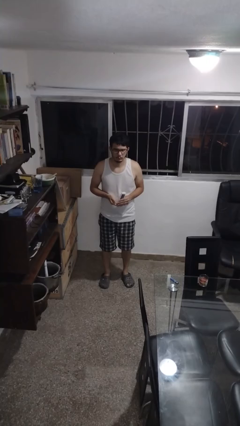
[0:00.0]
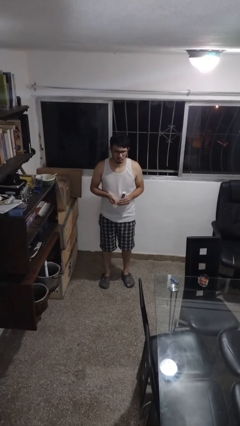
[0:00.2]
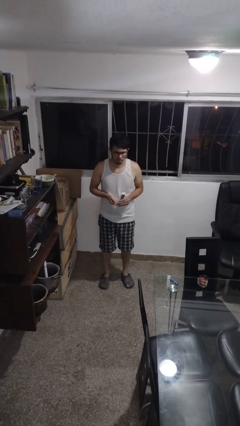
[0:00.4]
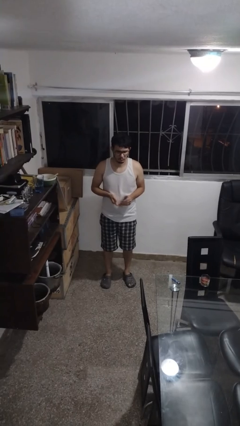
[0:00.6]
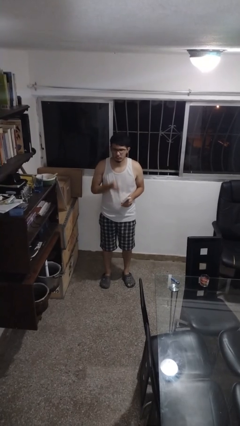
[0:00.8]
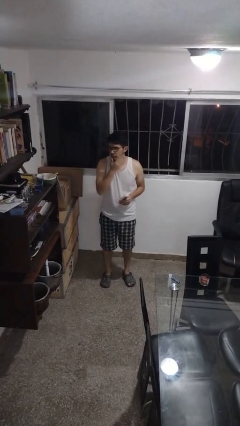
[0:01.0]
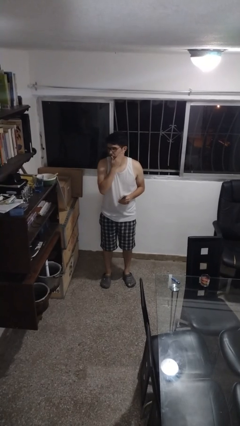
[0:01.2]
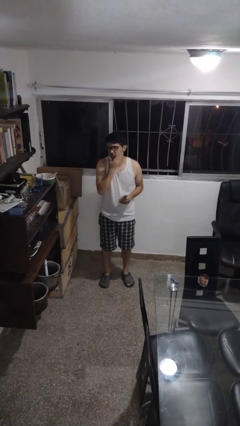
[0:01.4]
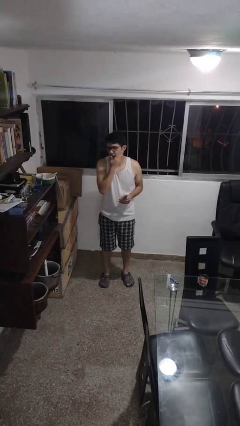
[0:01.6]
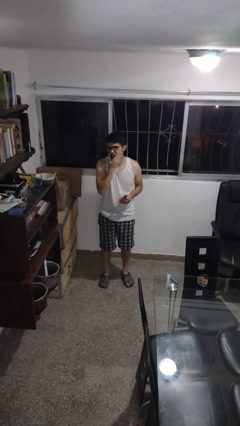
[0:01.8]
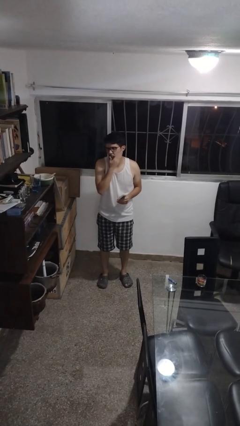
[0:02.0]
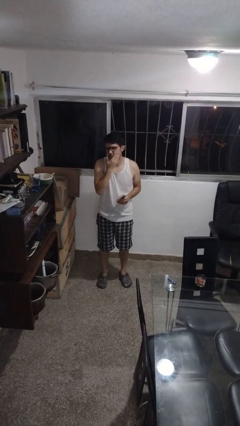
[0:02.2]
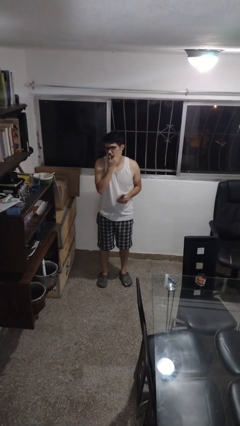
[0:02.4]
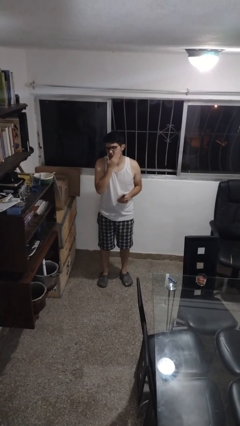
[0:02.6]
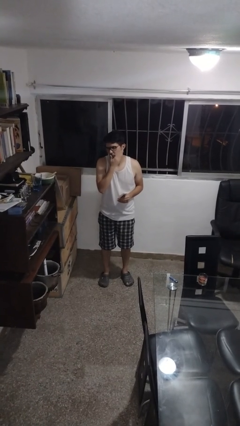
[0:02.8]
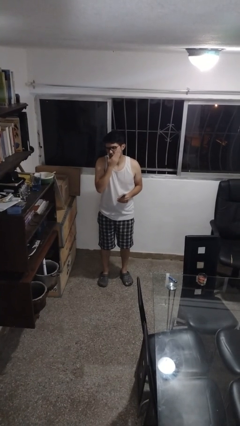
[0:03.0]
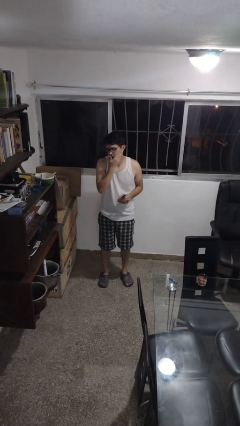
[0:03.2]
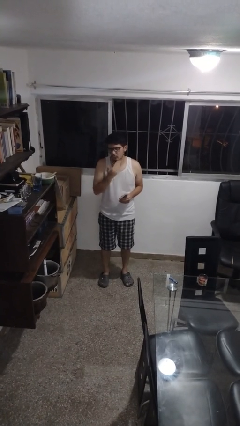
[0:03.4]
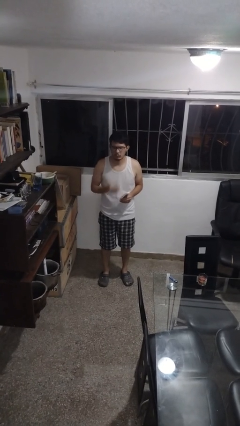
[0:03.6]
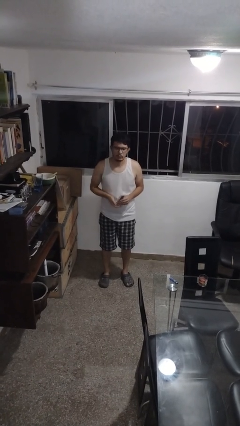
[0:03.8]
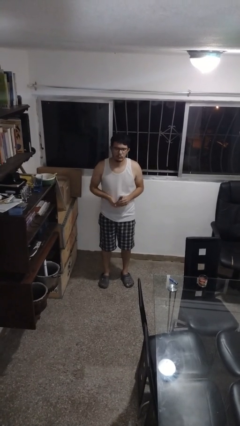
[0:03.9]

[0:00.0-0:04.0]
person applies facial moisturizer

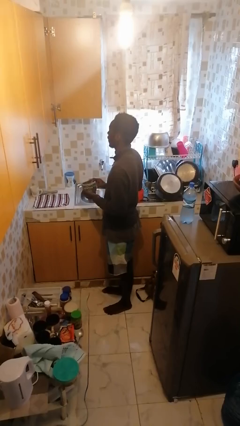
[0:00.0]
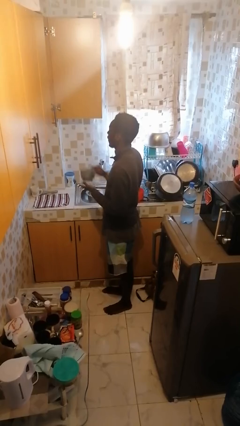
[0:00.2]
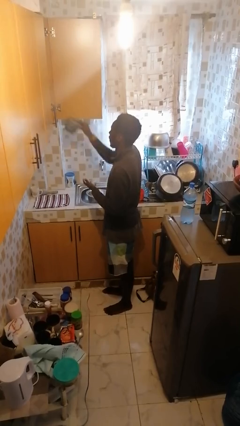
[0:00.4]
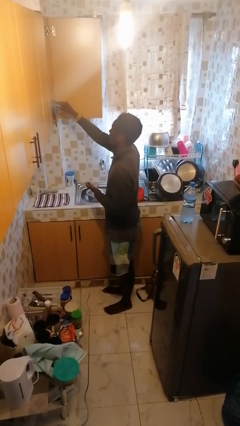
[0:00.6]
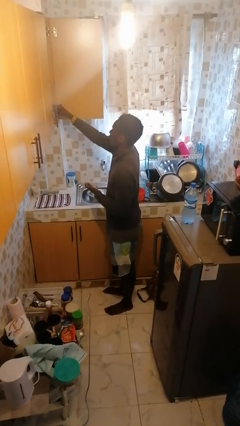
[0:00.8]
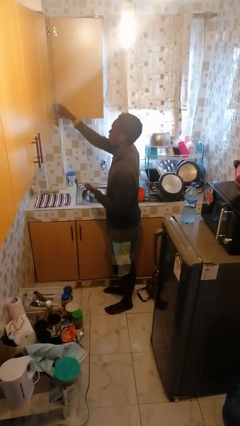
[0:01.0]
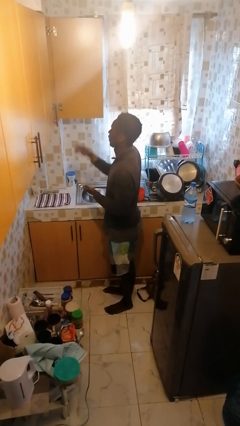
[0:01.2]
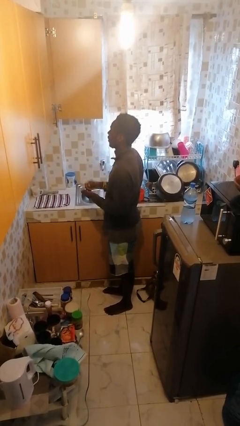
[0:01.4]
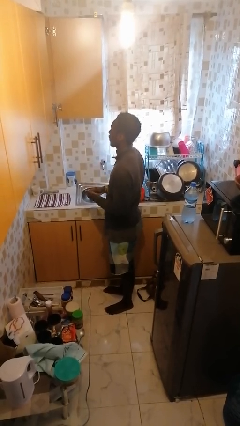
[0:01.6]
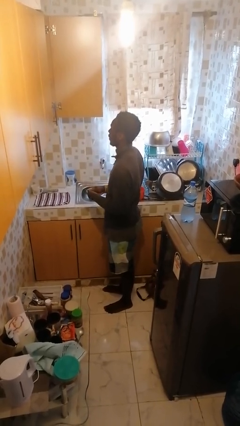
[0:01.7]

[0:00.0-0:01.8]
person puts down object into cabinet

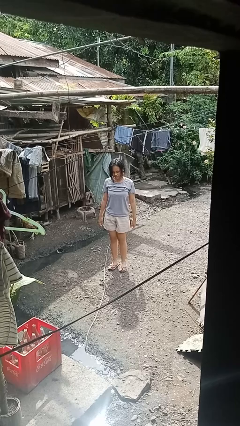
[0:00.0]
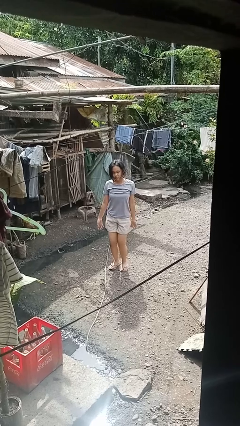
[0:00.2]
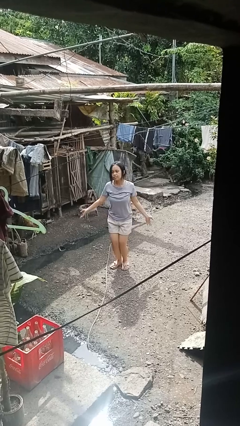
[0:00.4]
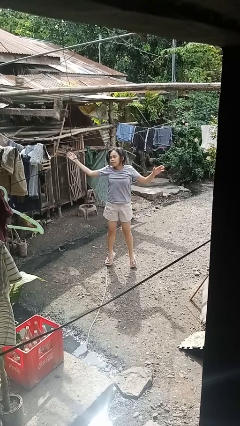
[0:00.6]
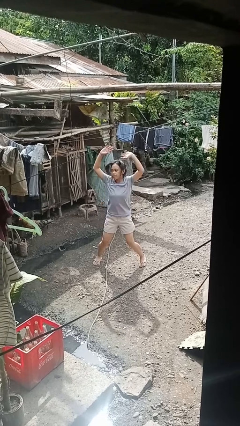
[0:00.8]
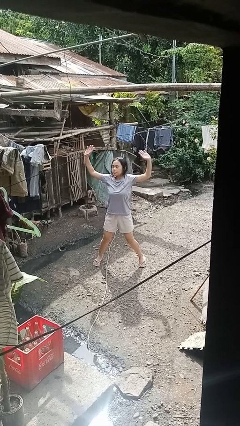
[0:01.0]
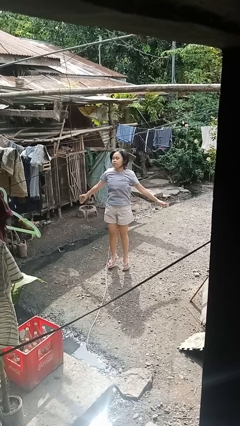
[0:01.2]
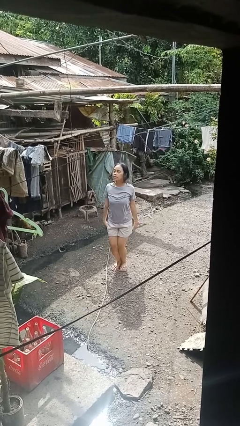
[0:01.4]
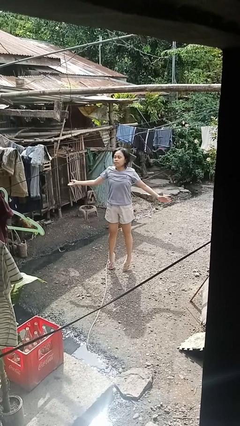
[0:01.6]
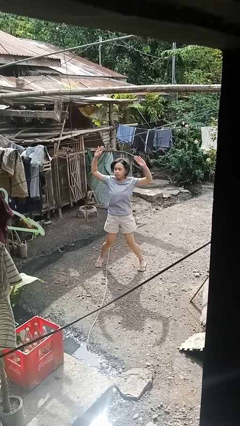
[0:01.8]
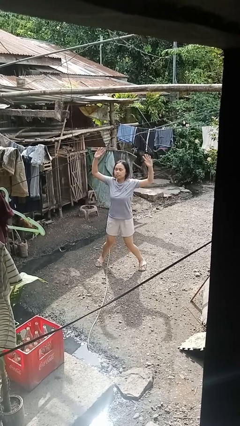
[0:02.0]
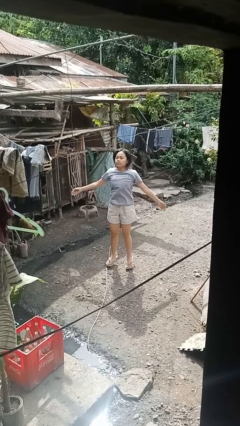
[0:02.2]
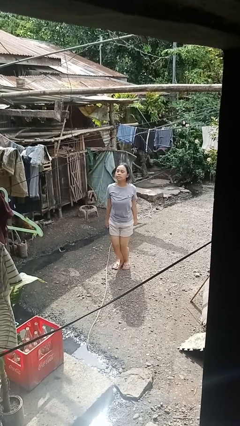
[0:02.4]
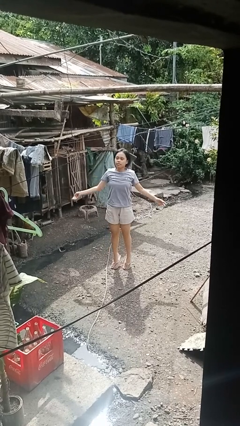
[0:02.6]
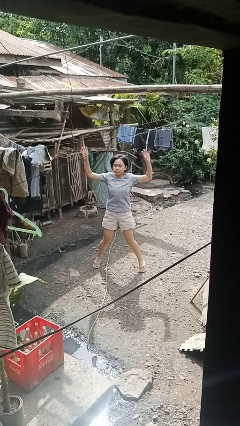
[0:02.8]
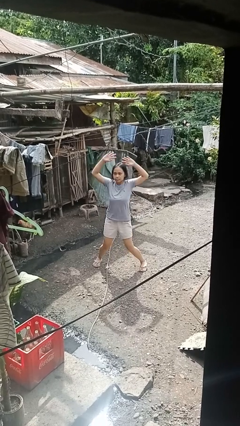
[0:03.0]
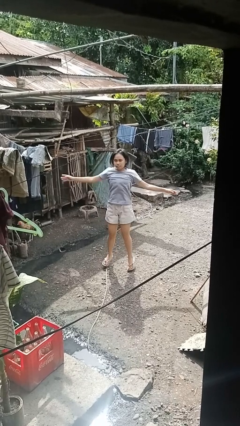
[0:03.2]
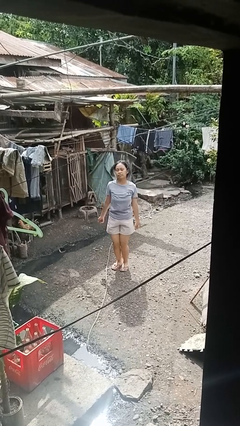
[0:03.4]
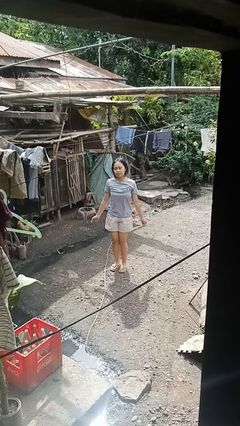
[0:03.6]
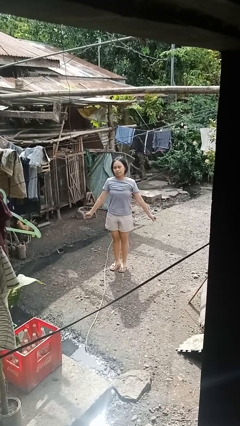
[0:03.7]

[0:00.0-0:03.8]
person exercises with jumping jacks

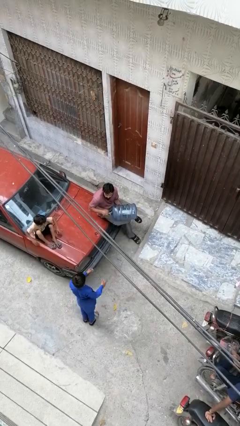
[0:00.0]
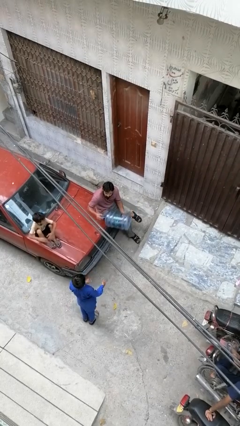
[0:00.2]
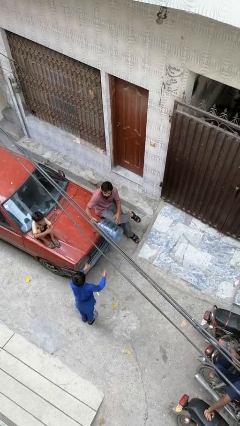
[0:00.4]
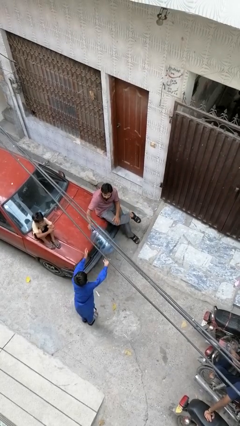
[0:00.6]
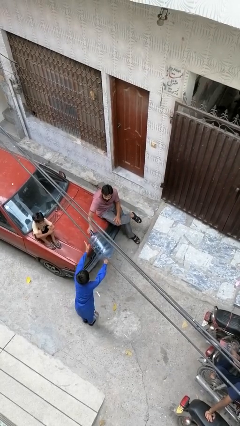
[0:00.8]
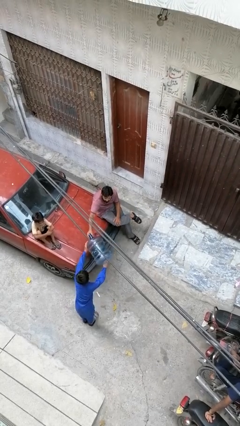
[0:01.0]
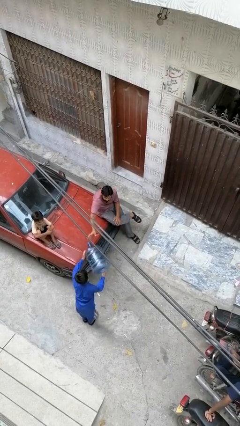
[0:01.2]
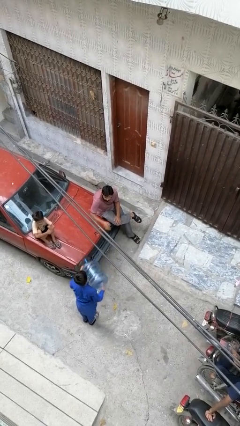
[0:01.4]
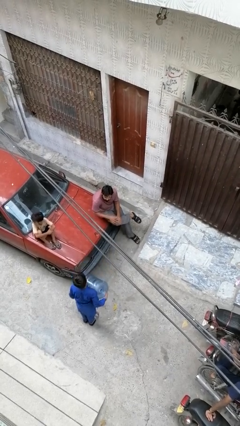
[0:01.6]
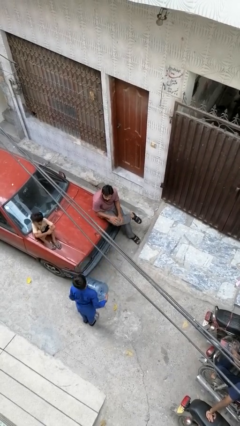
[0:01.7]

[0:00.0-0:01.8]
person transfers object to person

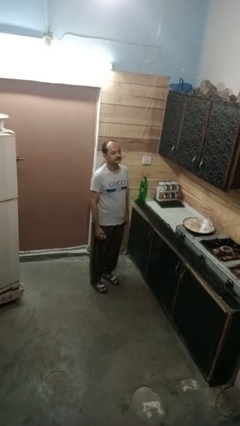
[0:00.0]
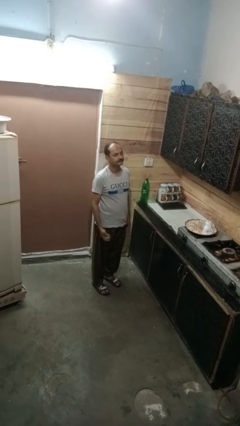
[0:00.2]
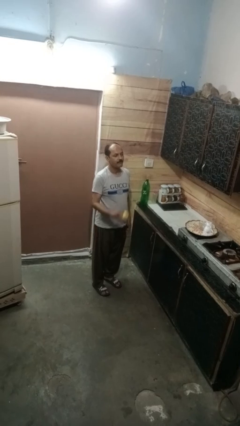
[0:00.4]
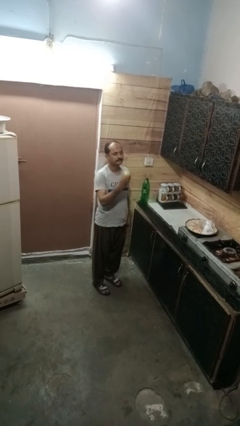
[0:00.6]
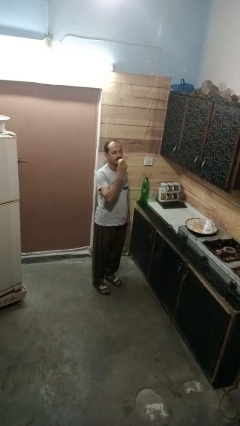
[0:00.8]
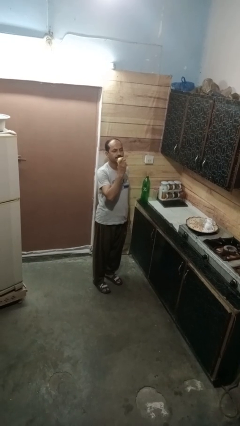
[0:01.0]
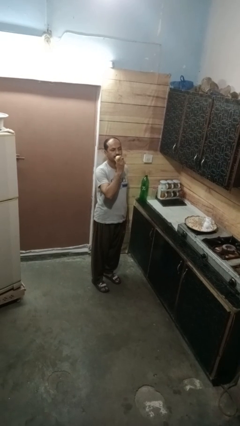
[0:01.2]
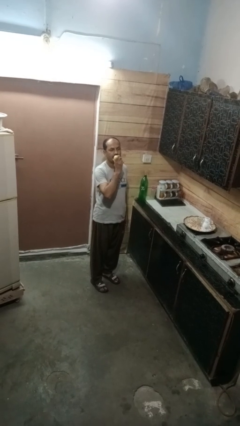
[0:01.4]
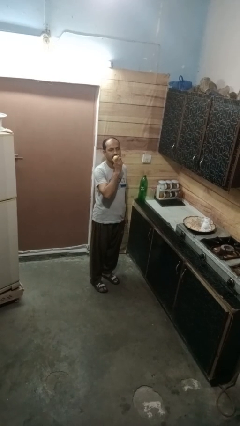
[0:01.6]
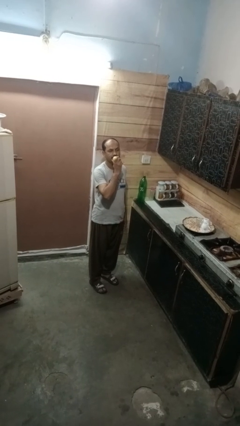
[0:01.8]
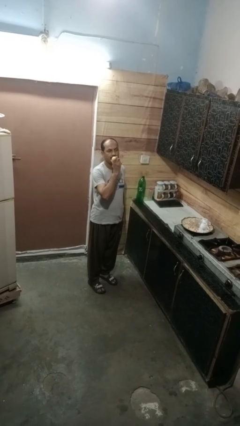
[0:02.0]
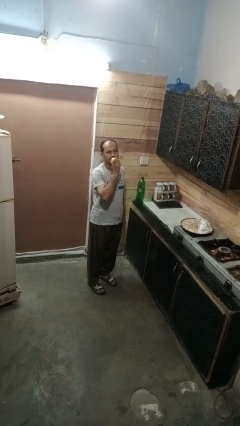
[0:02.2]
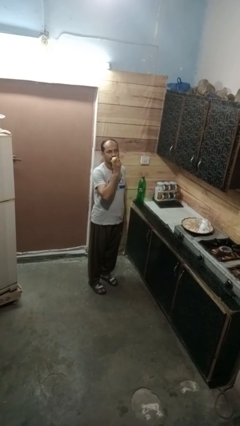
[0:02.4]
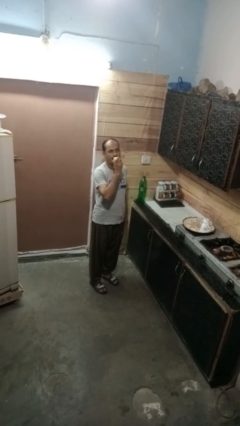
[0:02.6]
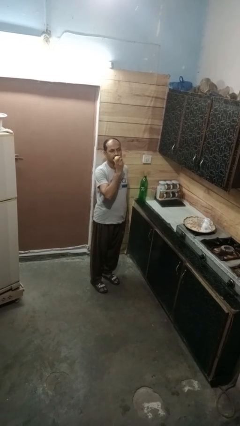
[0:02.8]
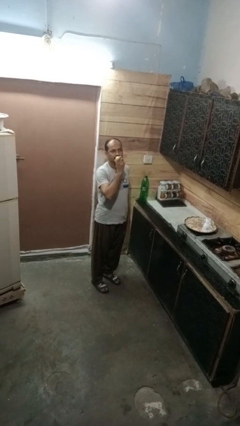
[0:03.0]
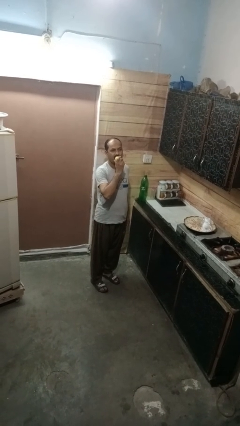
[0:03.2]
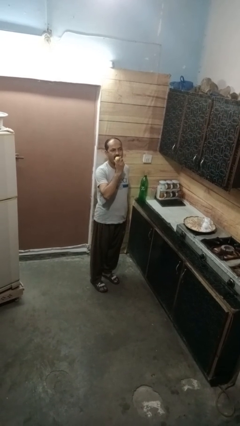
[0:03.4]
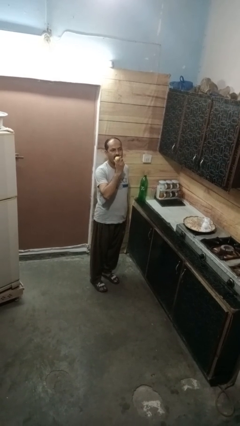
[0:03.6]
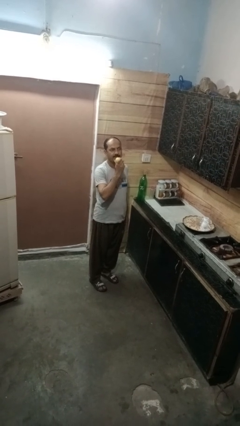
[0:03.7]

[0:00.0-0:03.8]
person eats apple

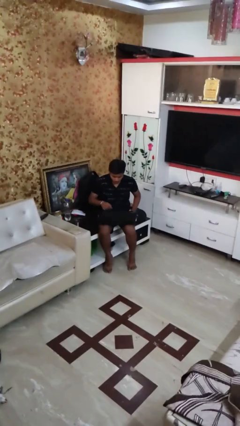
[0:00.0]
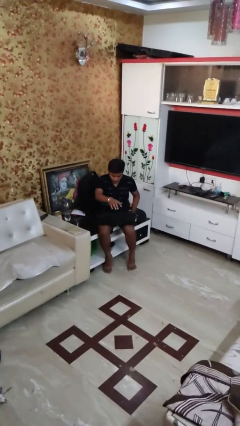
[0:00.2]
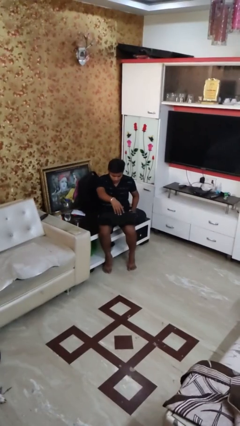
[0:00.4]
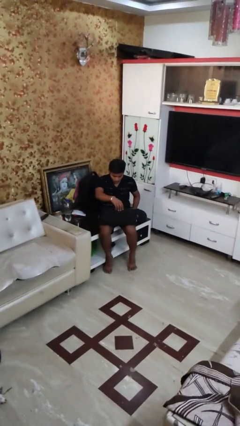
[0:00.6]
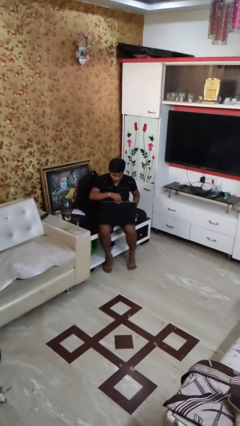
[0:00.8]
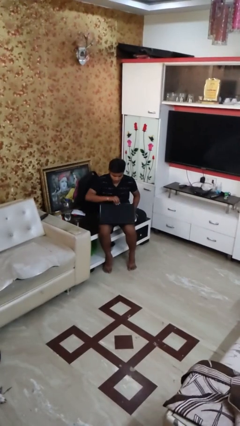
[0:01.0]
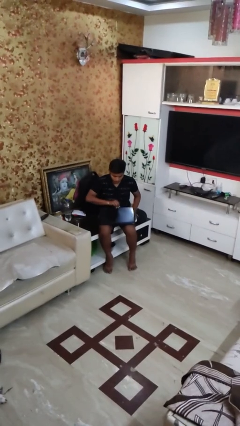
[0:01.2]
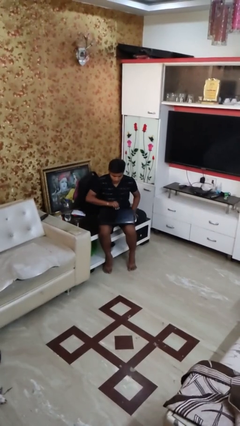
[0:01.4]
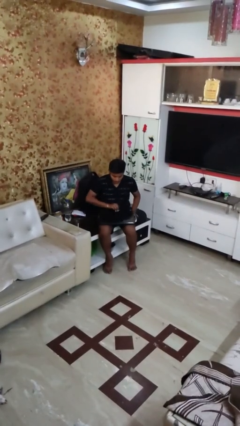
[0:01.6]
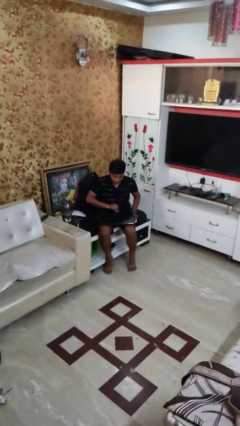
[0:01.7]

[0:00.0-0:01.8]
person closes laptop

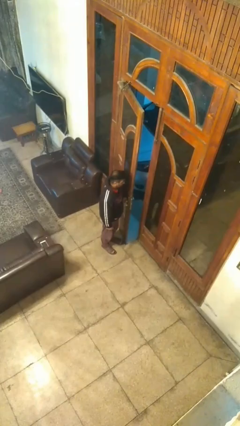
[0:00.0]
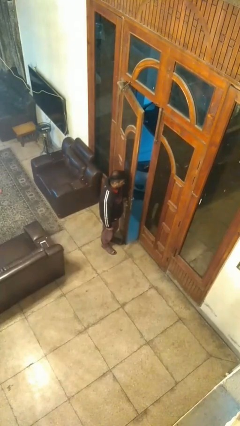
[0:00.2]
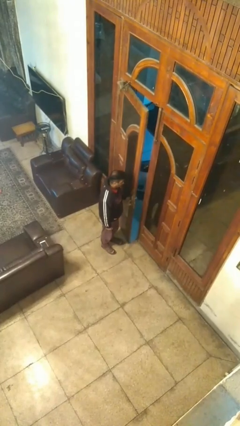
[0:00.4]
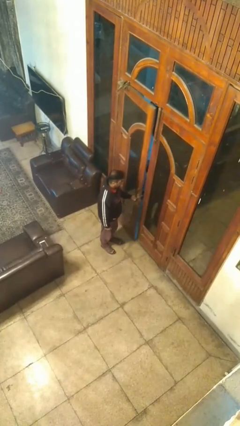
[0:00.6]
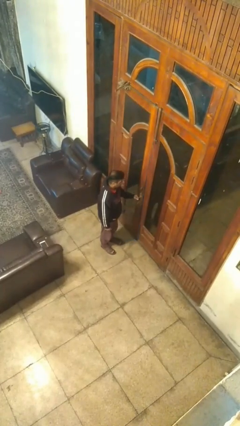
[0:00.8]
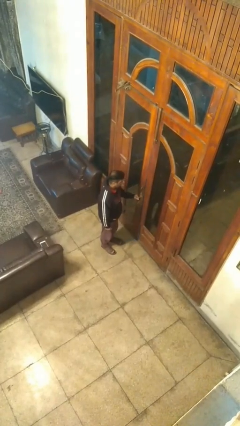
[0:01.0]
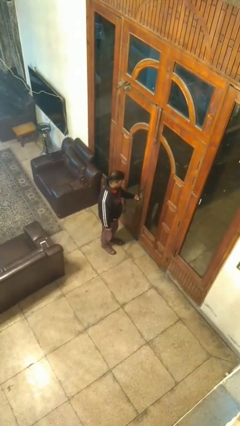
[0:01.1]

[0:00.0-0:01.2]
person closes facility door
